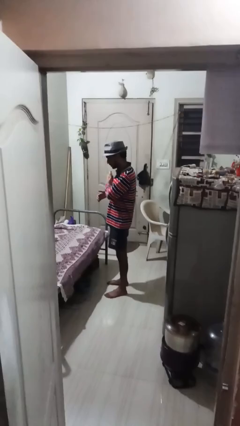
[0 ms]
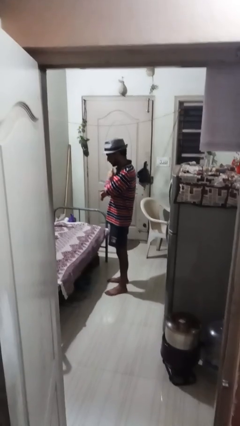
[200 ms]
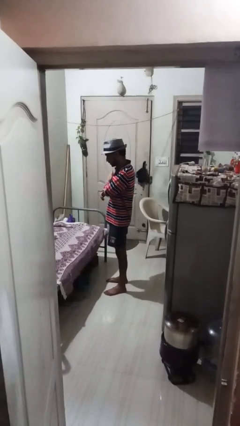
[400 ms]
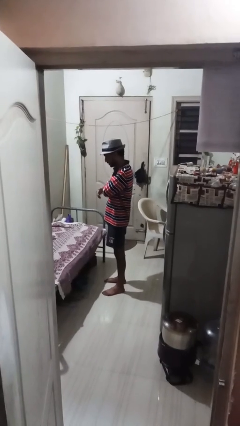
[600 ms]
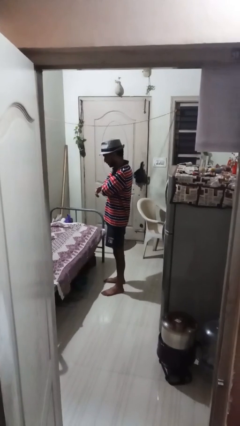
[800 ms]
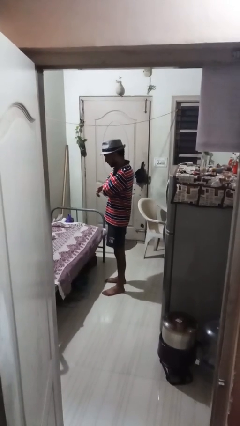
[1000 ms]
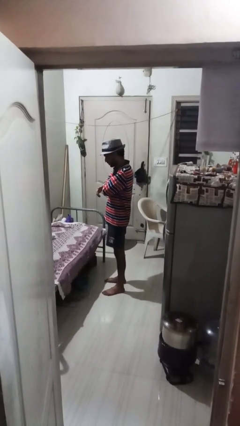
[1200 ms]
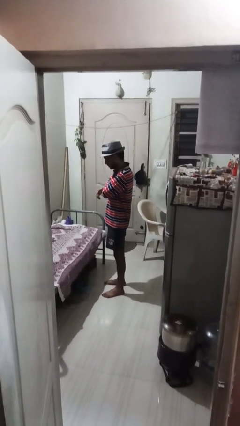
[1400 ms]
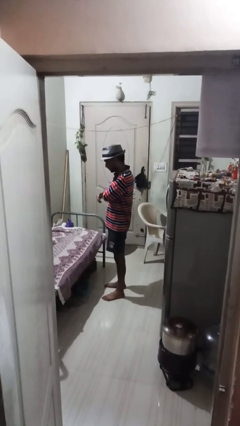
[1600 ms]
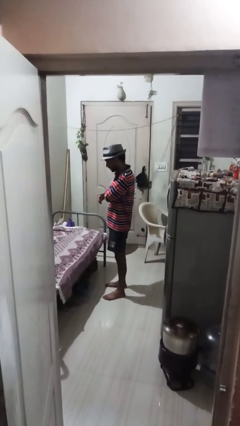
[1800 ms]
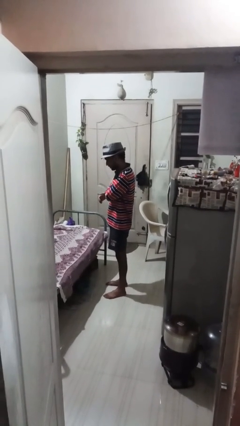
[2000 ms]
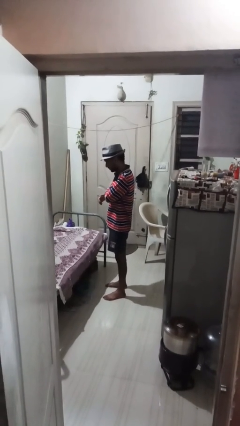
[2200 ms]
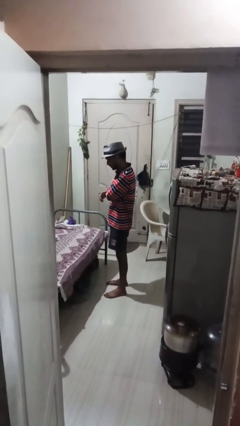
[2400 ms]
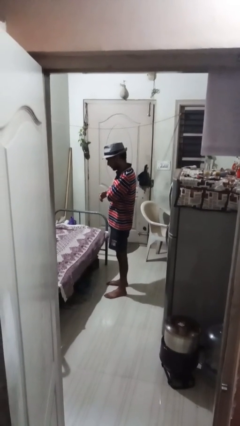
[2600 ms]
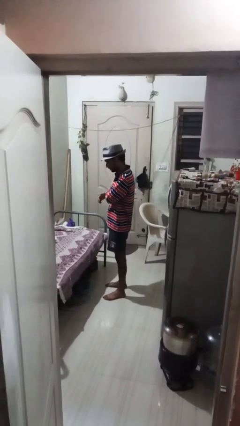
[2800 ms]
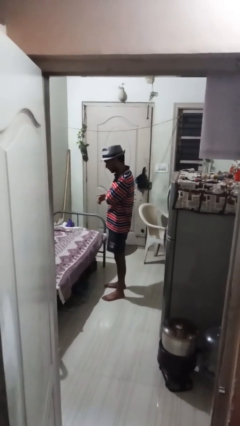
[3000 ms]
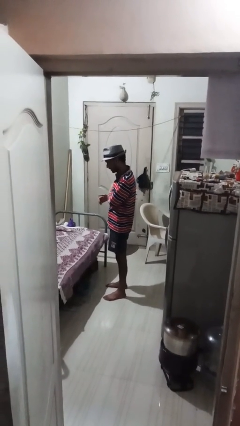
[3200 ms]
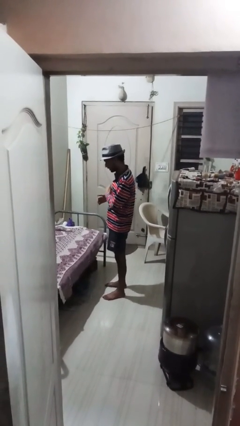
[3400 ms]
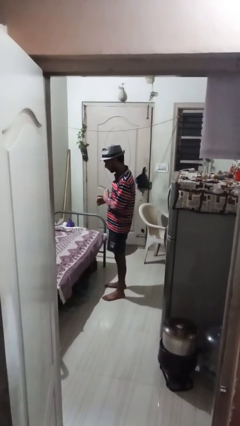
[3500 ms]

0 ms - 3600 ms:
person applies deodorant

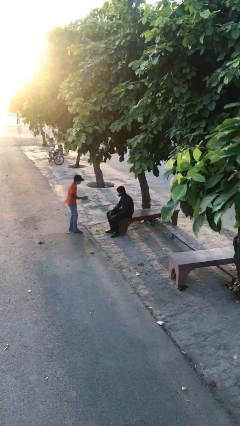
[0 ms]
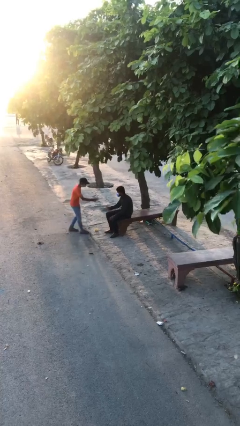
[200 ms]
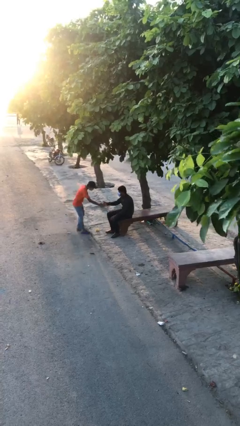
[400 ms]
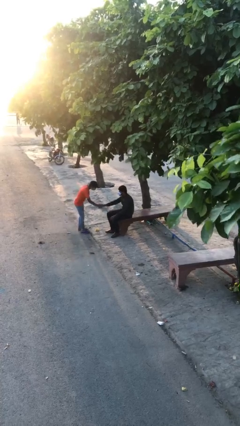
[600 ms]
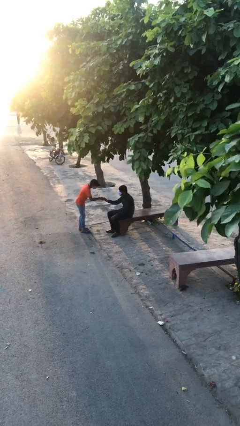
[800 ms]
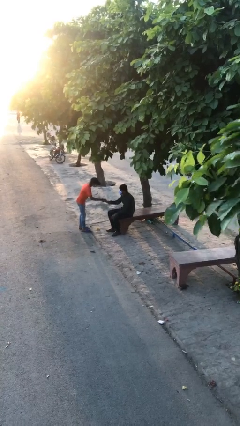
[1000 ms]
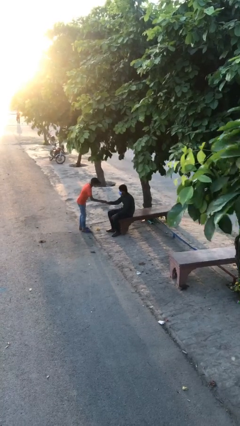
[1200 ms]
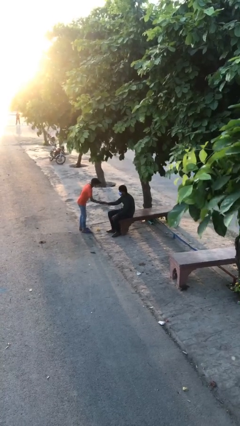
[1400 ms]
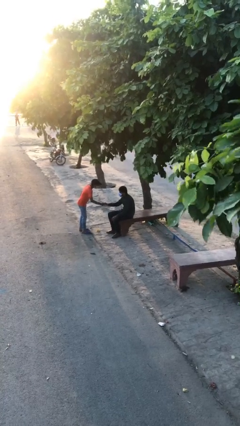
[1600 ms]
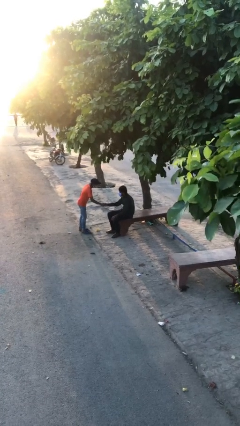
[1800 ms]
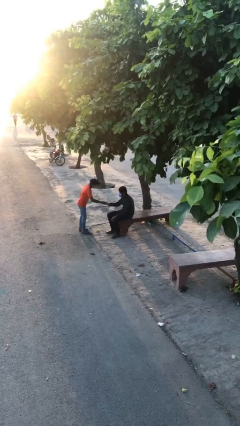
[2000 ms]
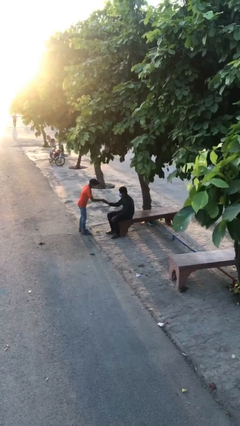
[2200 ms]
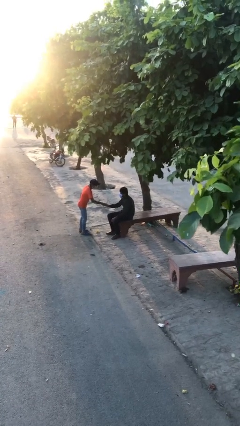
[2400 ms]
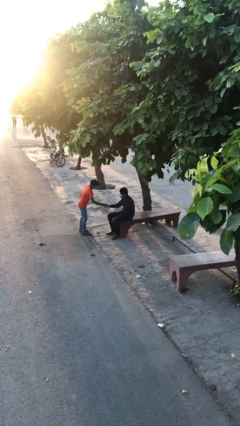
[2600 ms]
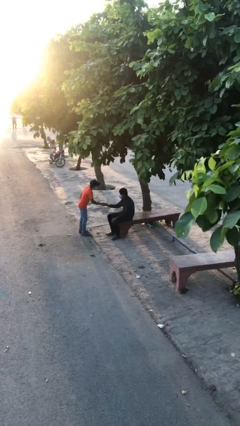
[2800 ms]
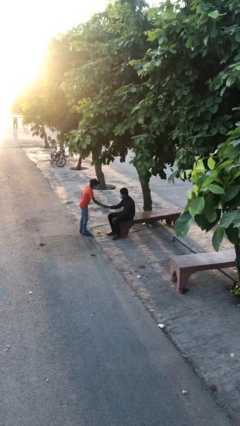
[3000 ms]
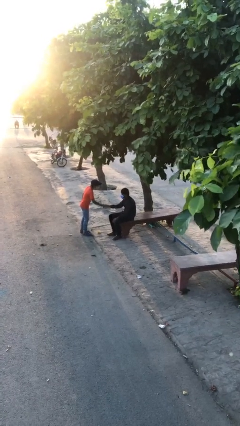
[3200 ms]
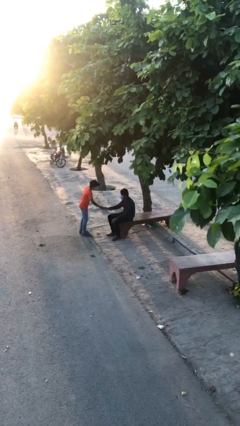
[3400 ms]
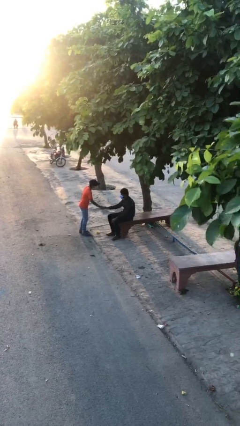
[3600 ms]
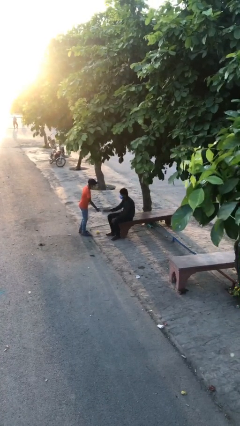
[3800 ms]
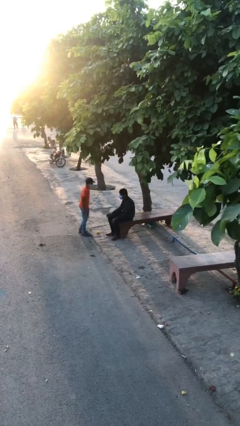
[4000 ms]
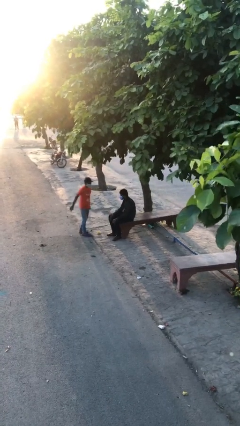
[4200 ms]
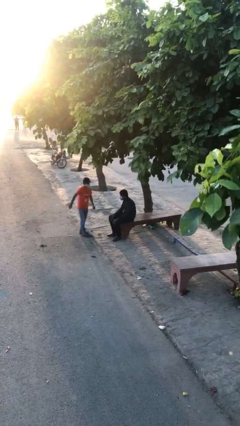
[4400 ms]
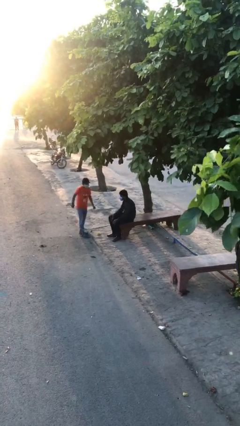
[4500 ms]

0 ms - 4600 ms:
person shakes hand

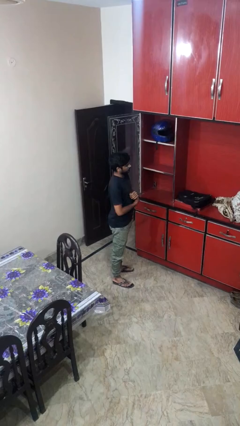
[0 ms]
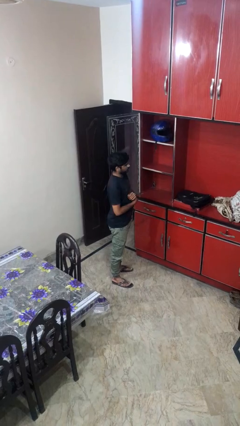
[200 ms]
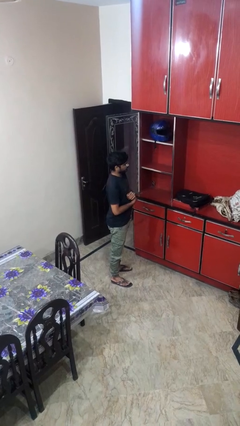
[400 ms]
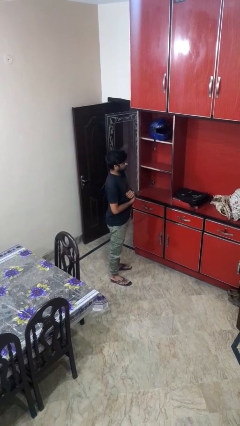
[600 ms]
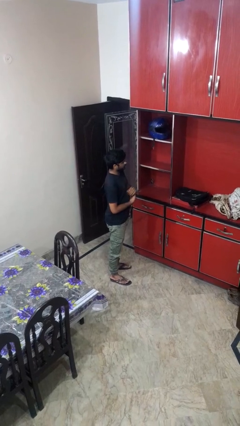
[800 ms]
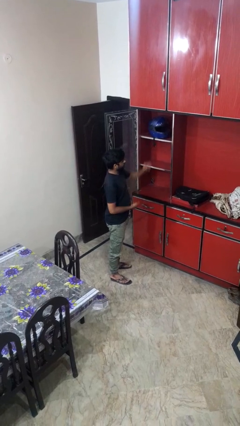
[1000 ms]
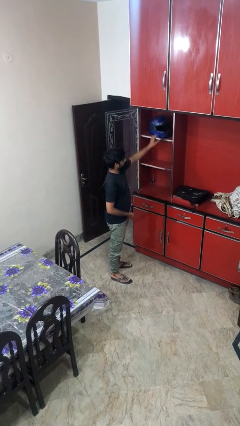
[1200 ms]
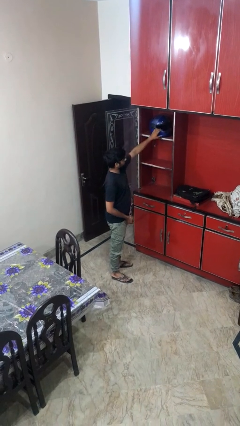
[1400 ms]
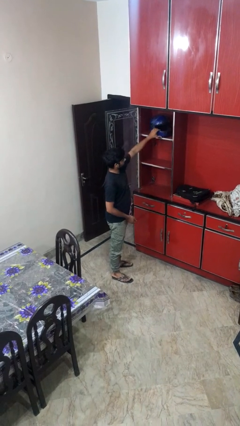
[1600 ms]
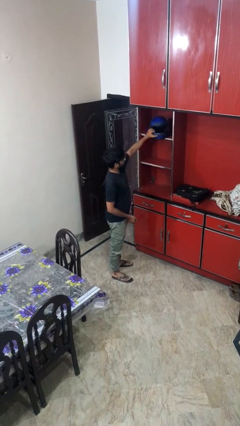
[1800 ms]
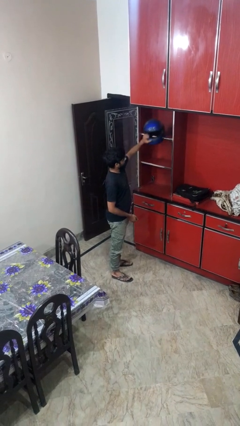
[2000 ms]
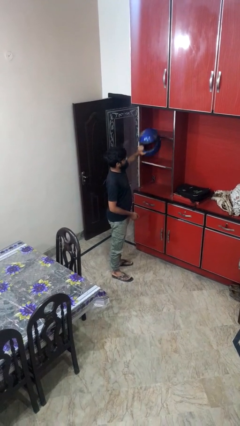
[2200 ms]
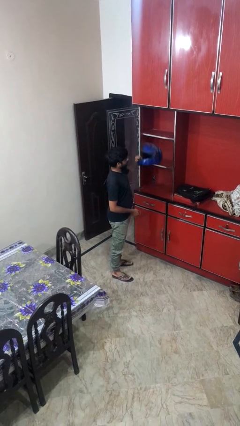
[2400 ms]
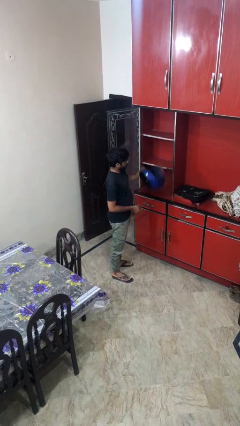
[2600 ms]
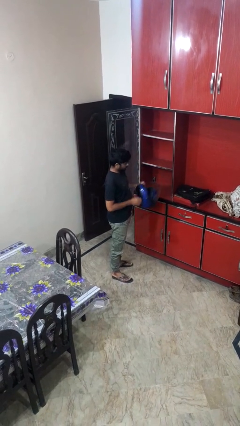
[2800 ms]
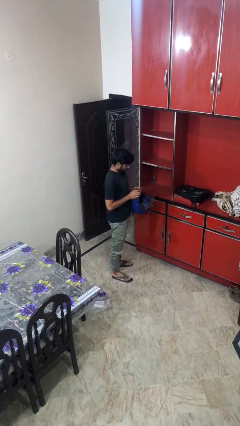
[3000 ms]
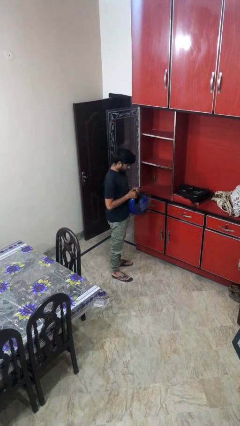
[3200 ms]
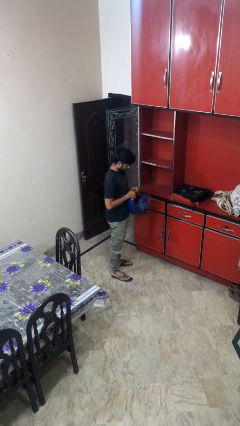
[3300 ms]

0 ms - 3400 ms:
person picks up object from shelf

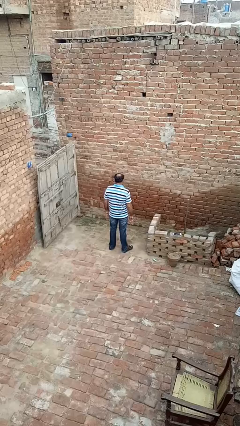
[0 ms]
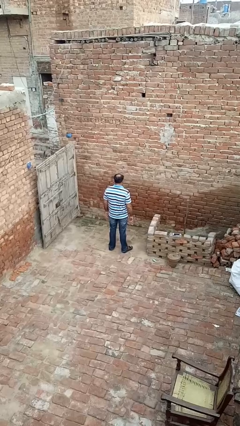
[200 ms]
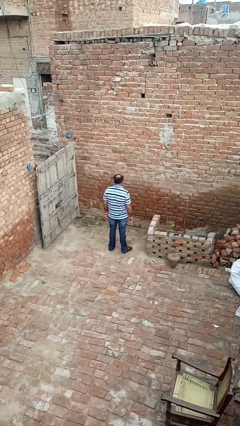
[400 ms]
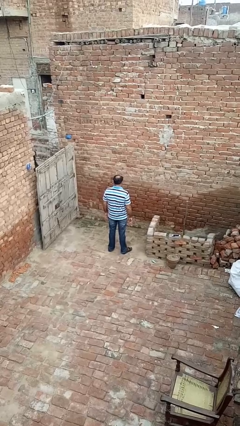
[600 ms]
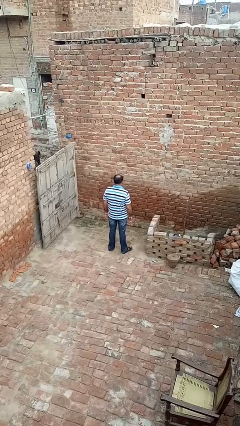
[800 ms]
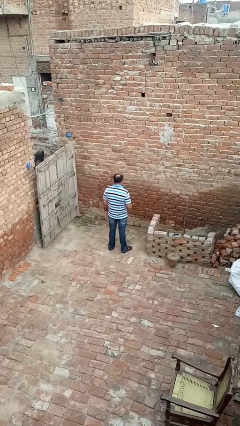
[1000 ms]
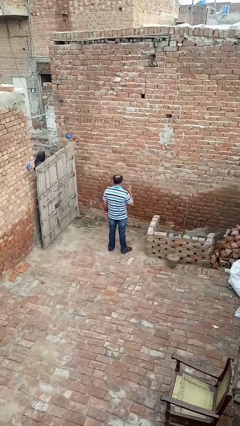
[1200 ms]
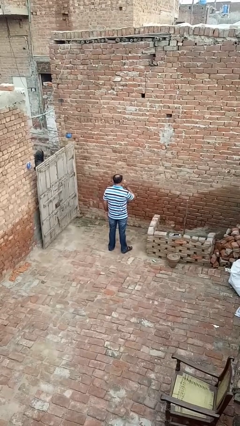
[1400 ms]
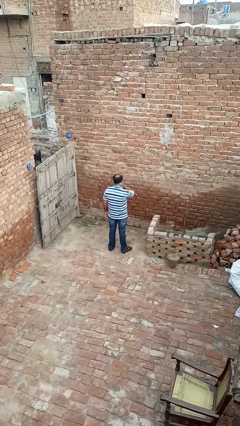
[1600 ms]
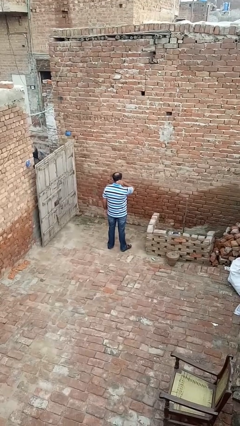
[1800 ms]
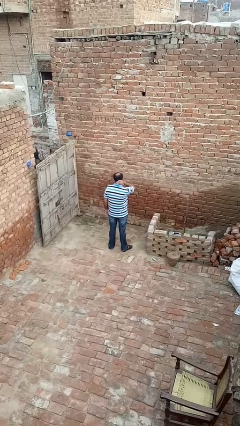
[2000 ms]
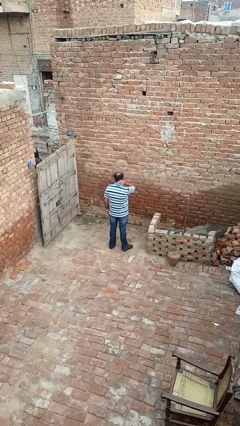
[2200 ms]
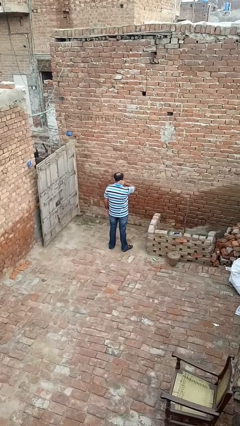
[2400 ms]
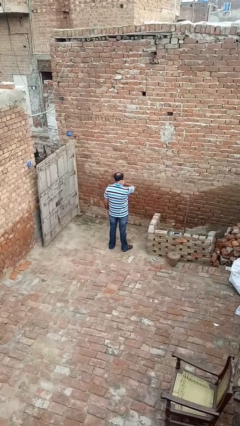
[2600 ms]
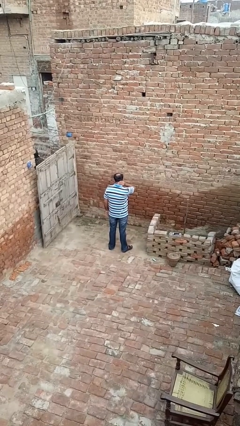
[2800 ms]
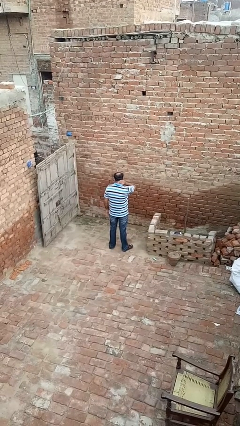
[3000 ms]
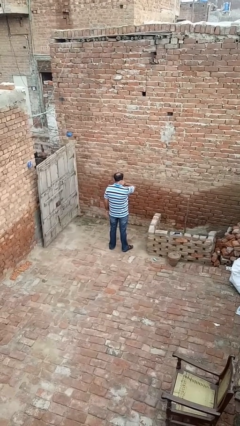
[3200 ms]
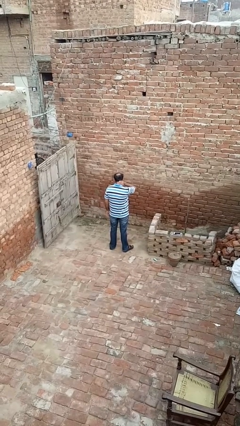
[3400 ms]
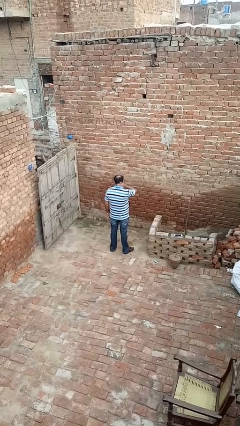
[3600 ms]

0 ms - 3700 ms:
person rubs neck

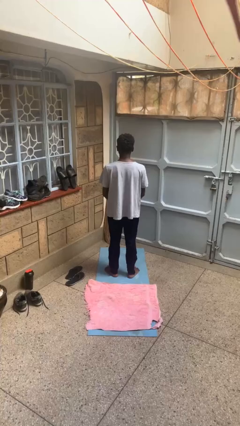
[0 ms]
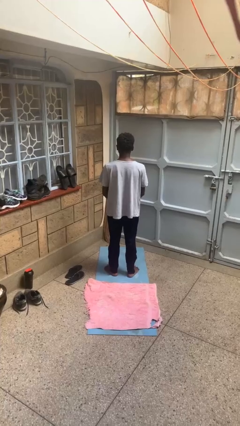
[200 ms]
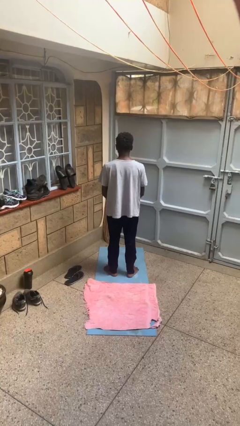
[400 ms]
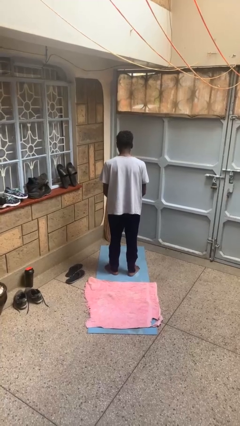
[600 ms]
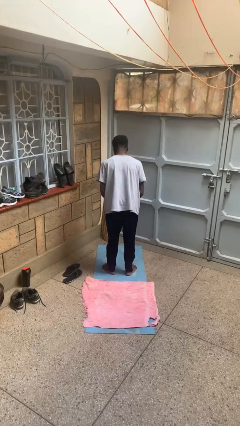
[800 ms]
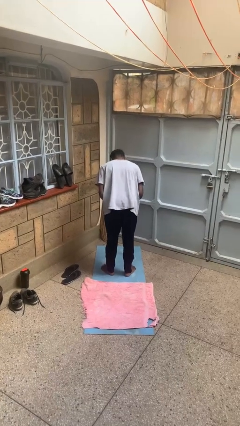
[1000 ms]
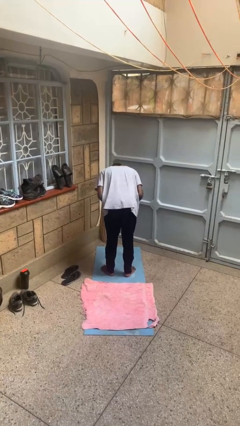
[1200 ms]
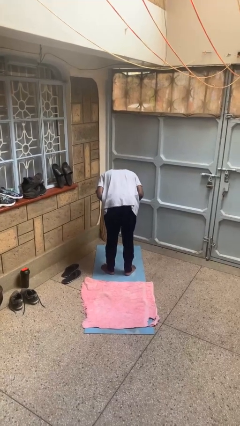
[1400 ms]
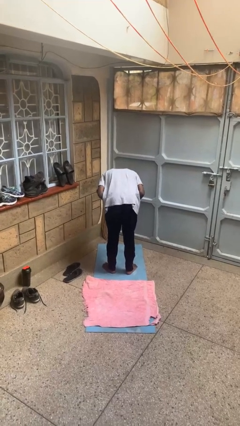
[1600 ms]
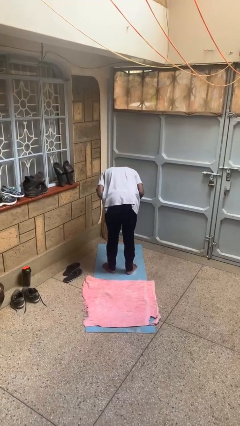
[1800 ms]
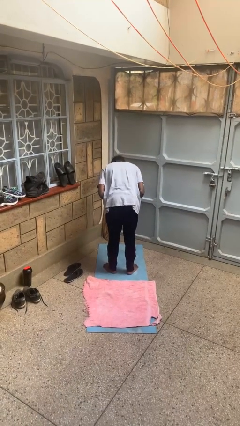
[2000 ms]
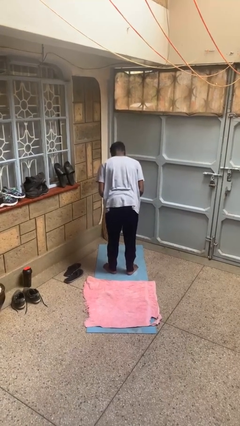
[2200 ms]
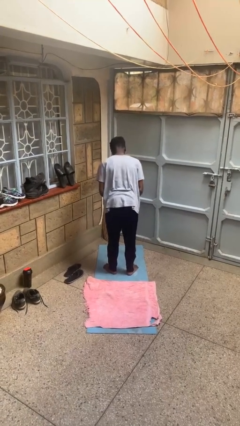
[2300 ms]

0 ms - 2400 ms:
person bows

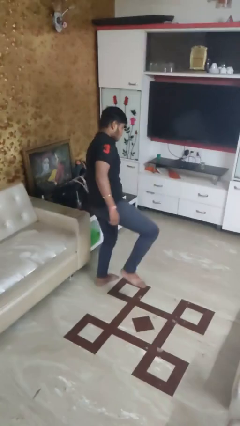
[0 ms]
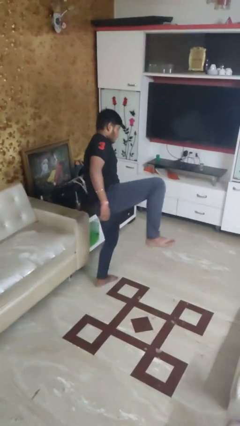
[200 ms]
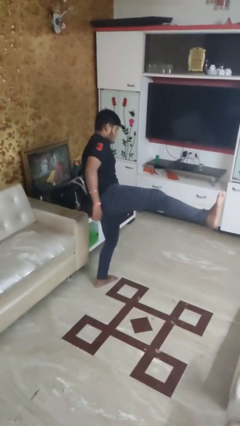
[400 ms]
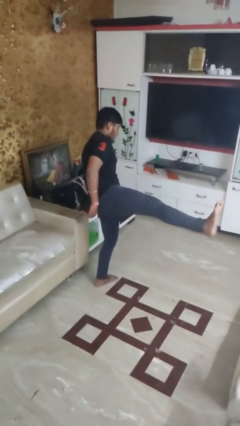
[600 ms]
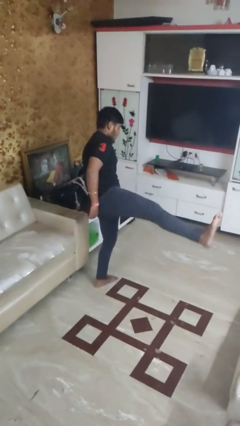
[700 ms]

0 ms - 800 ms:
person karate kicks
